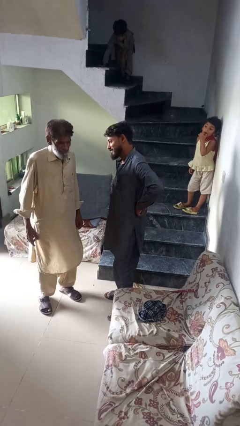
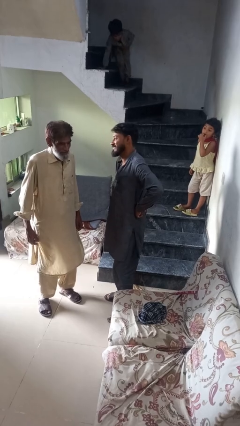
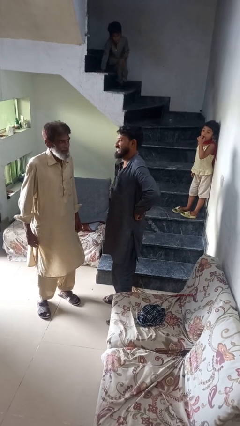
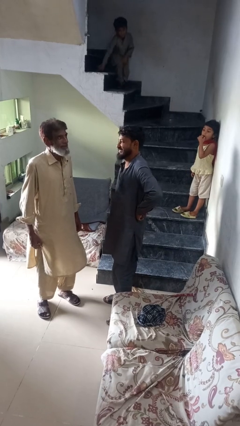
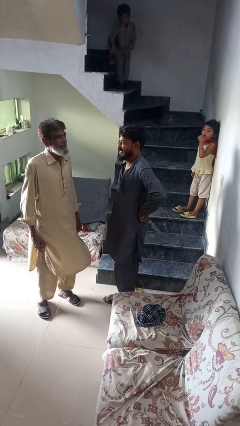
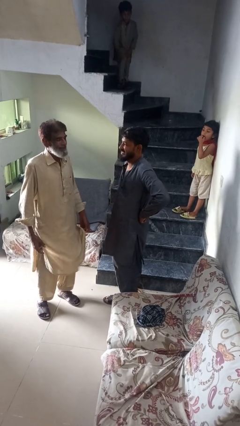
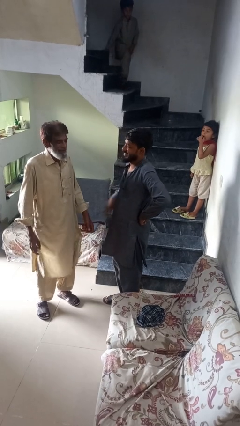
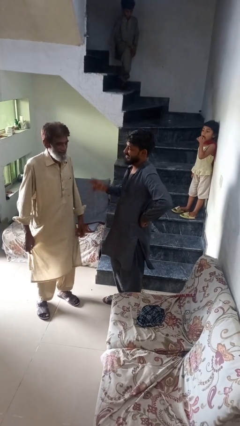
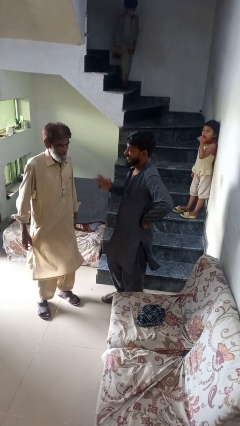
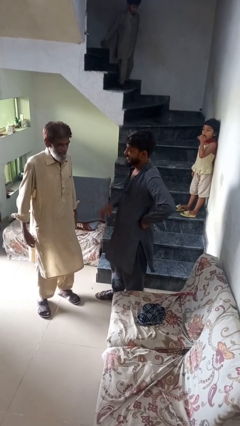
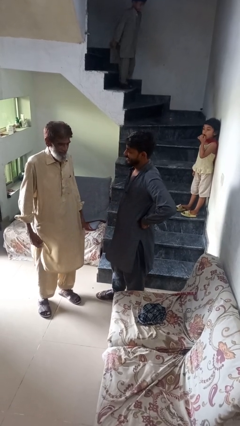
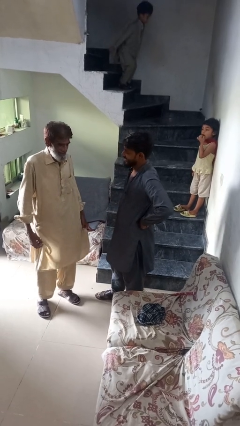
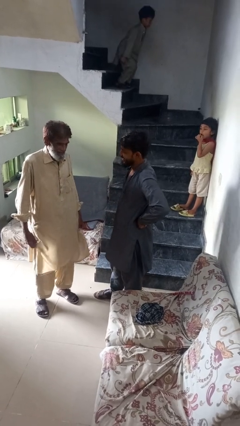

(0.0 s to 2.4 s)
person laughs with person

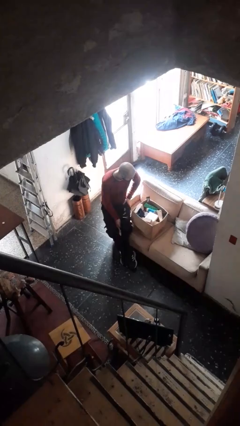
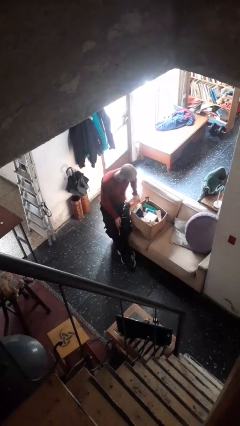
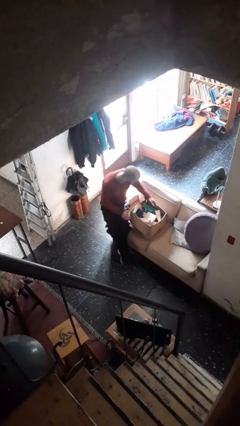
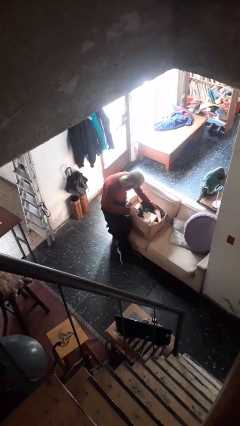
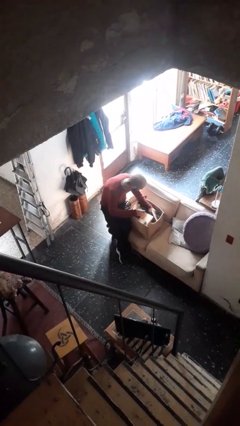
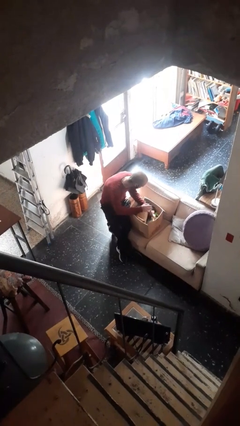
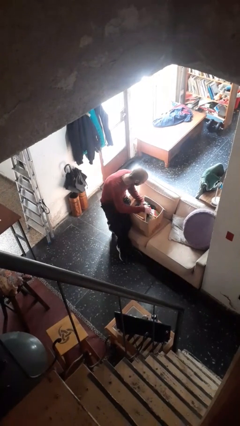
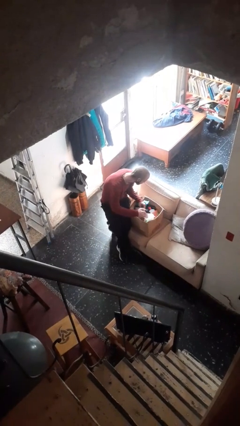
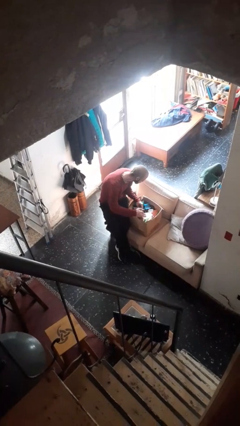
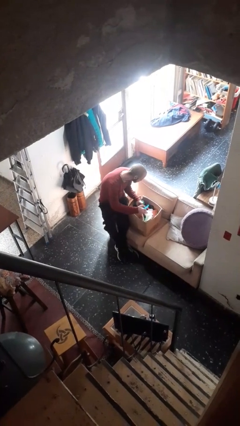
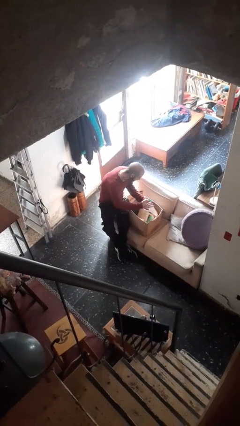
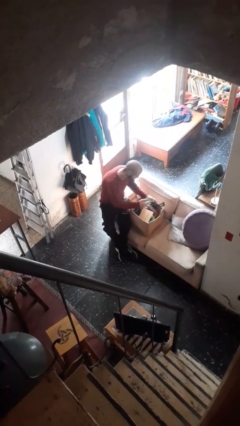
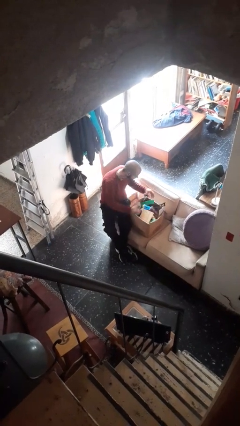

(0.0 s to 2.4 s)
person searches in box

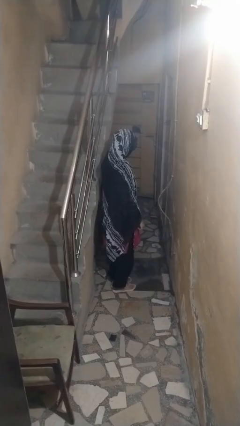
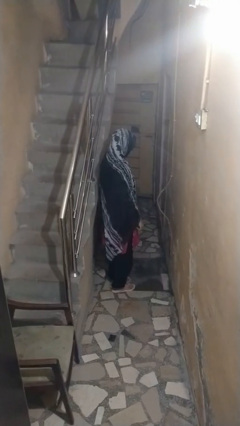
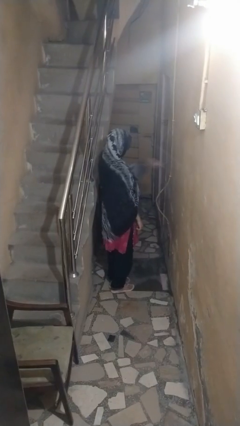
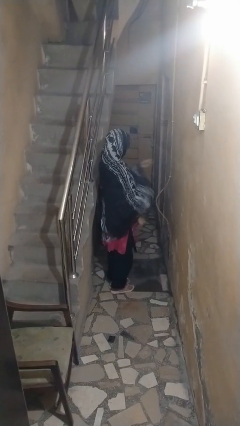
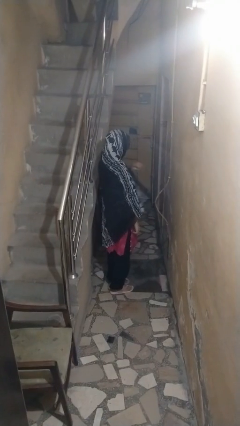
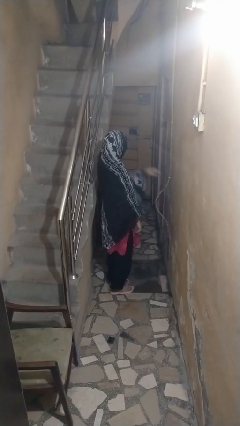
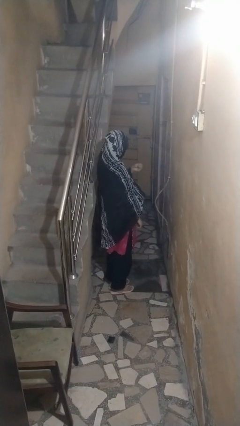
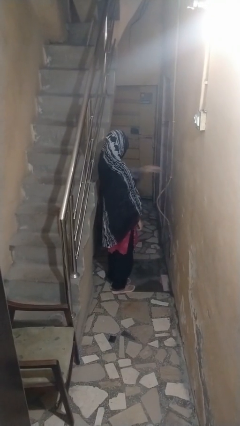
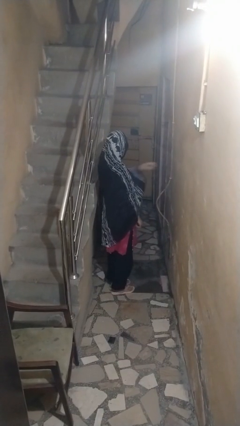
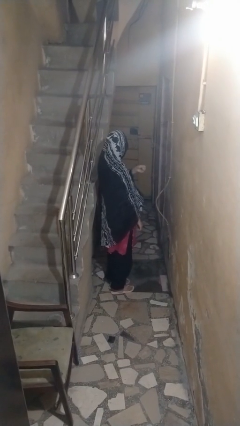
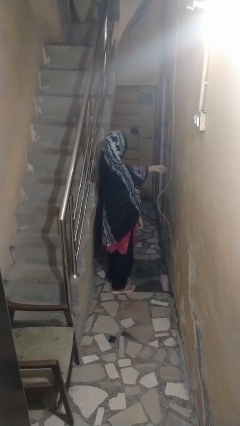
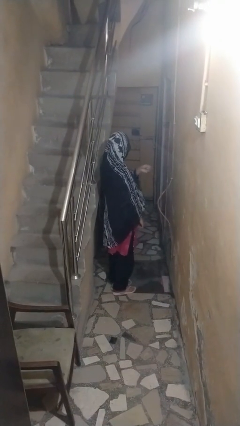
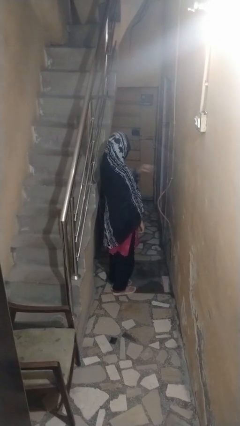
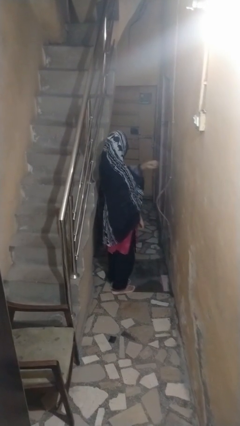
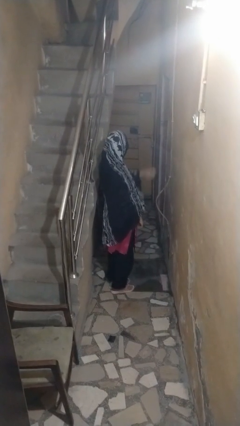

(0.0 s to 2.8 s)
person punches

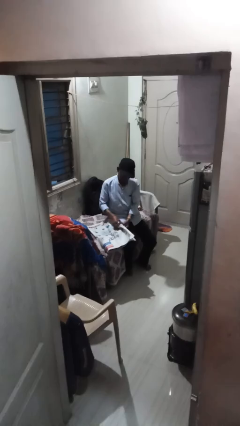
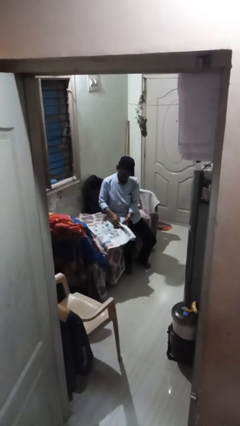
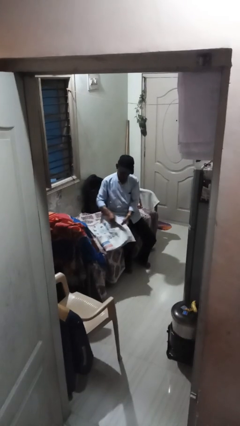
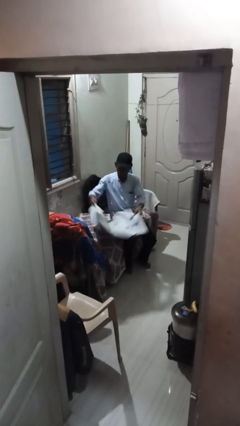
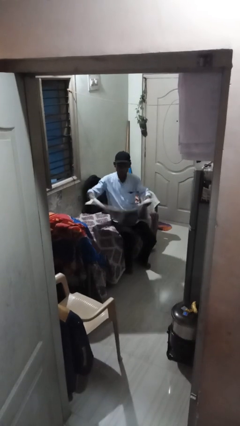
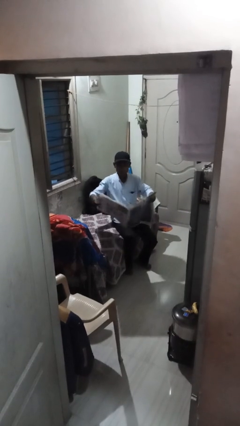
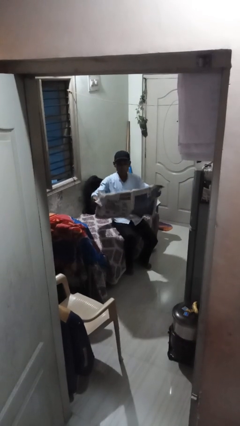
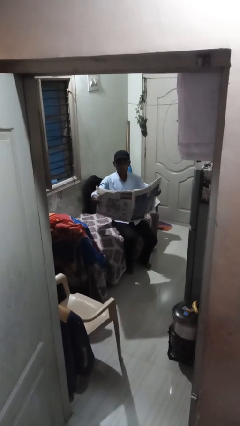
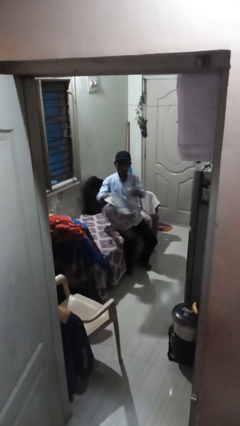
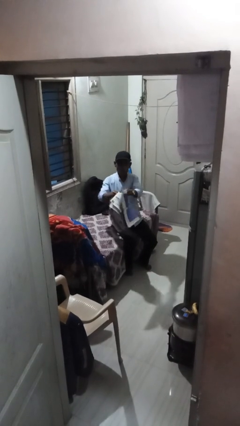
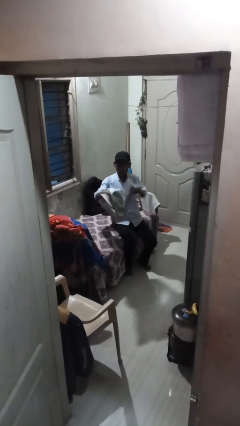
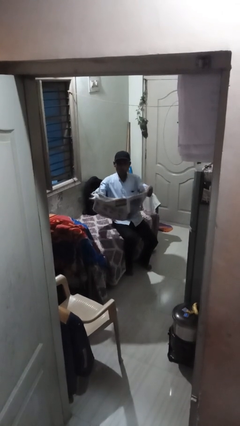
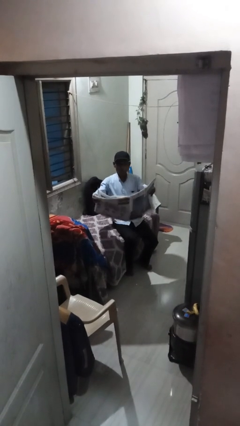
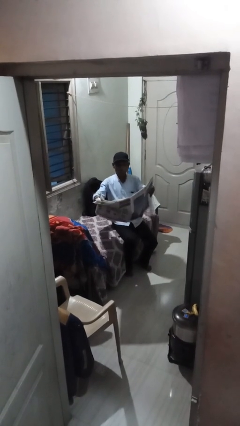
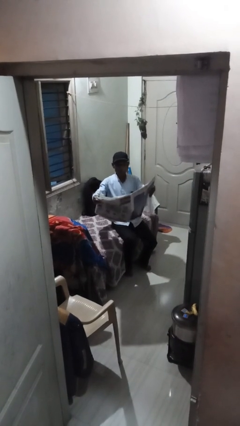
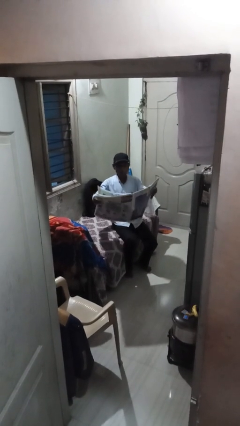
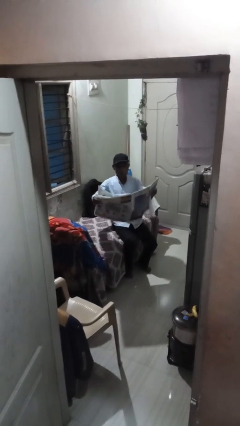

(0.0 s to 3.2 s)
person reads newspaper

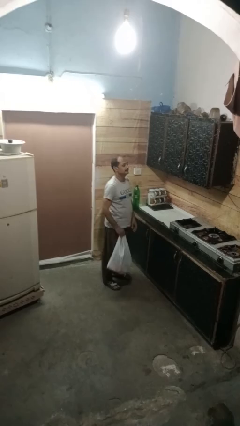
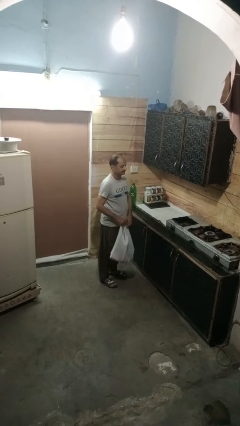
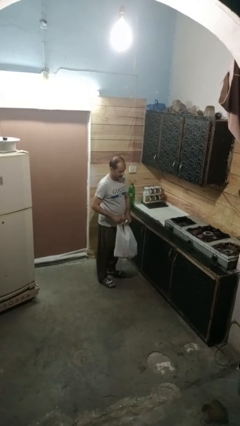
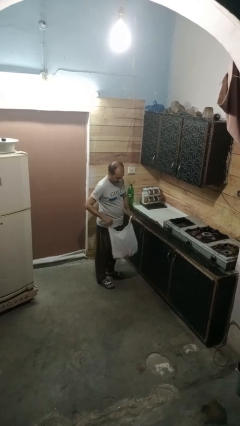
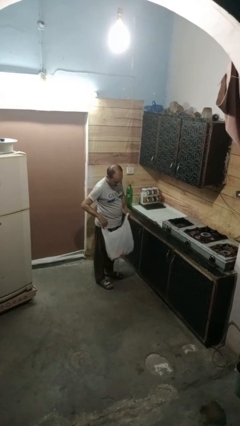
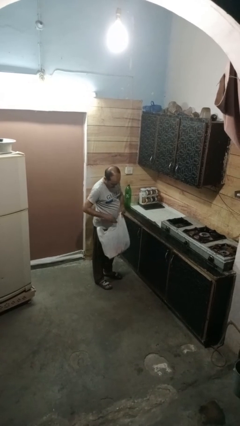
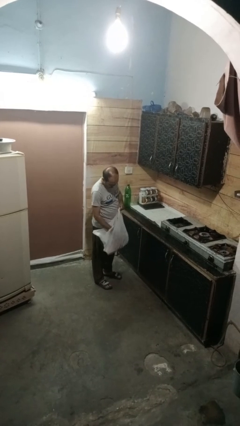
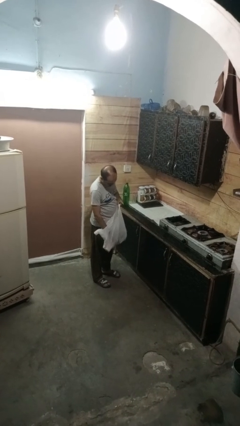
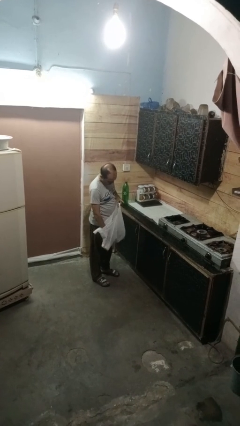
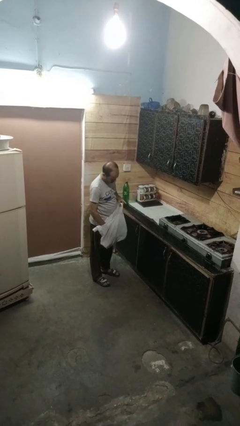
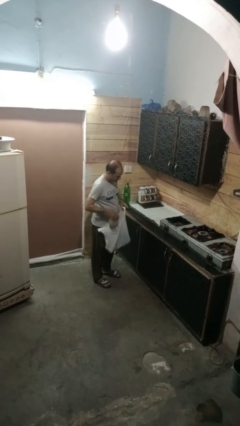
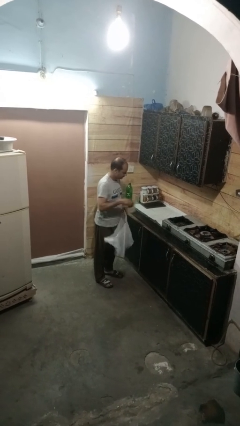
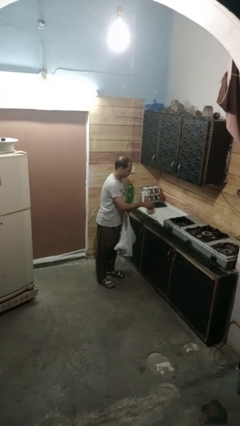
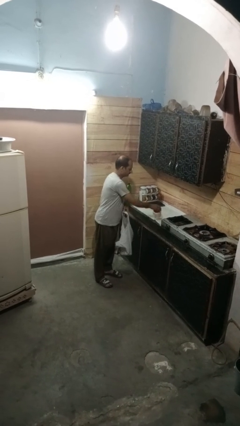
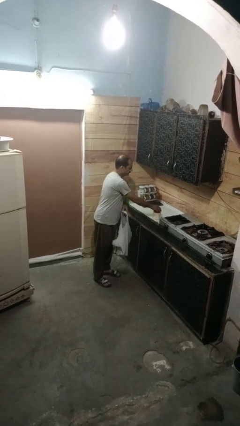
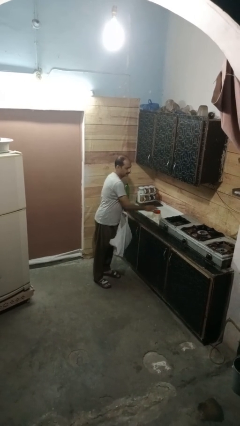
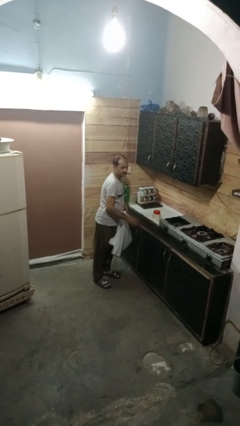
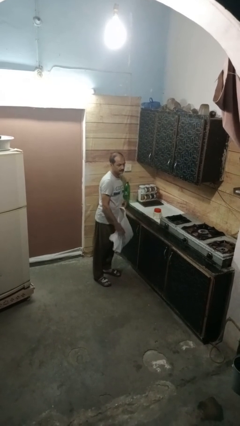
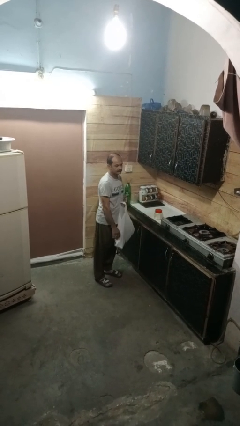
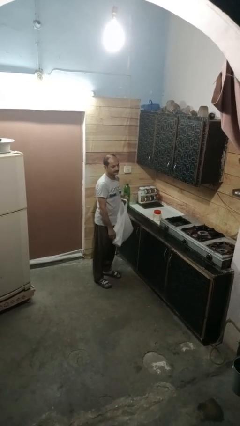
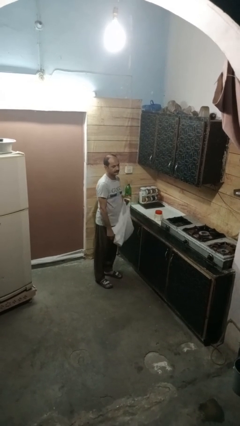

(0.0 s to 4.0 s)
person takes object from bag

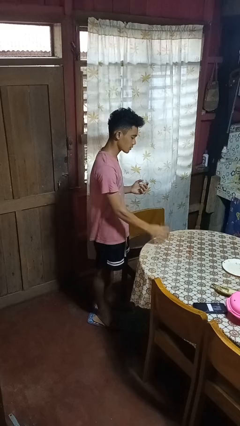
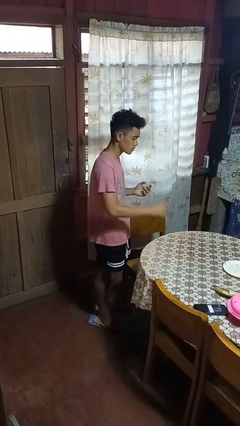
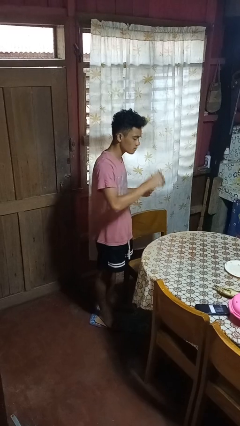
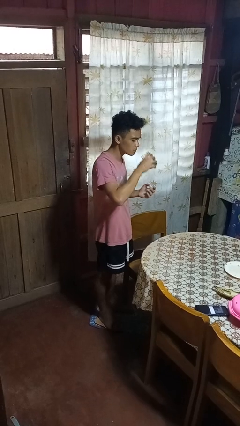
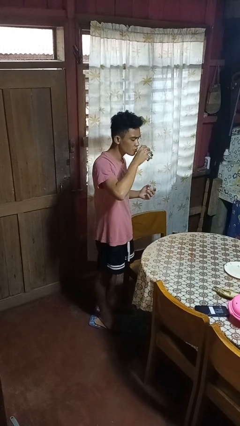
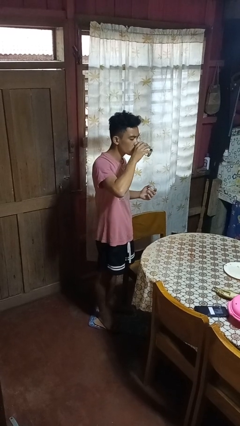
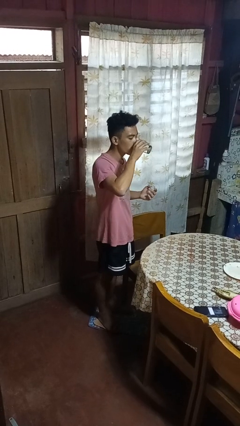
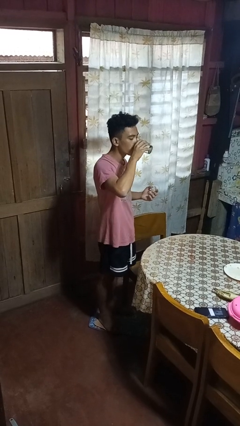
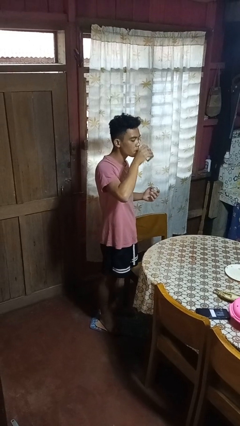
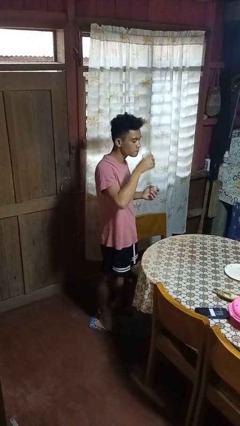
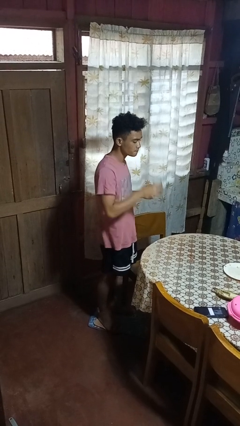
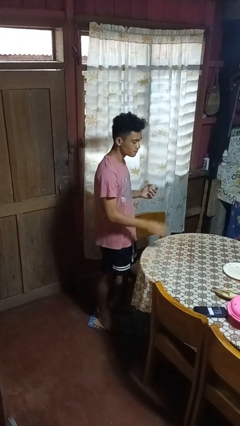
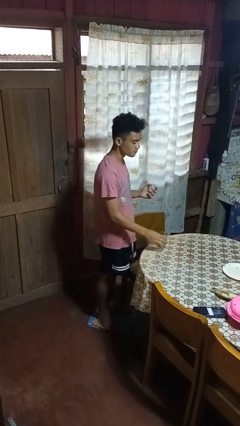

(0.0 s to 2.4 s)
person drinks from cup
